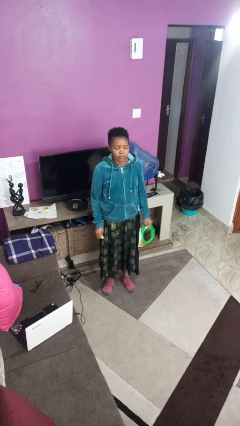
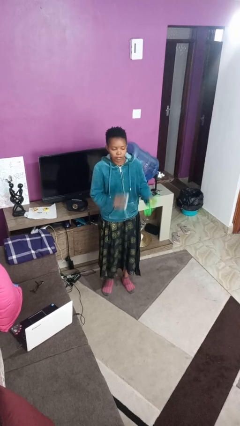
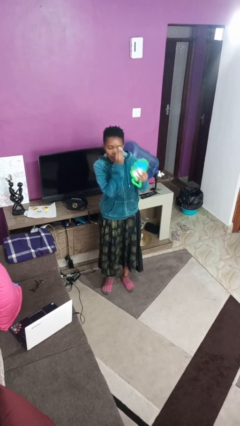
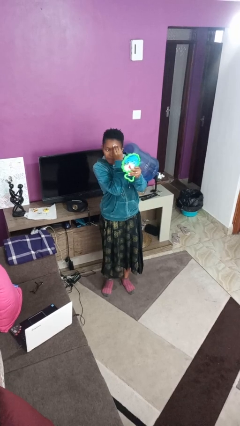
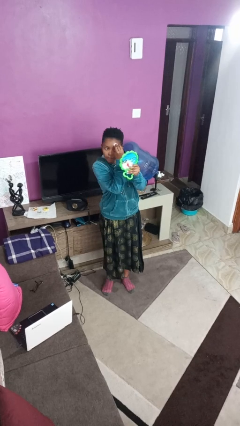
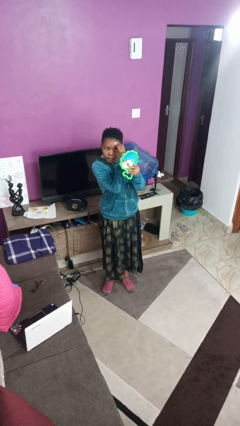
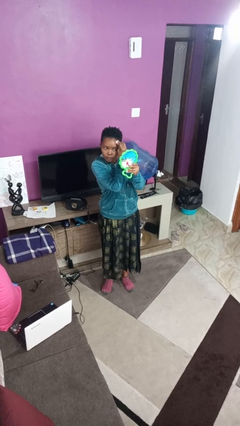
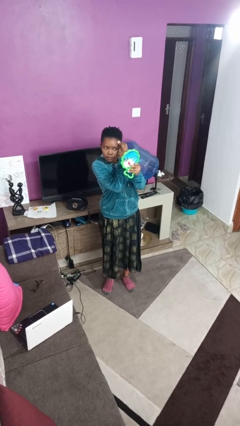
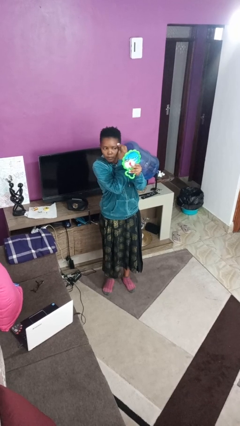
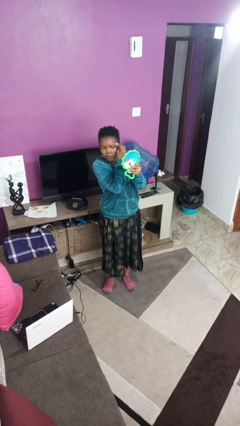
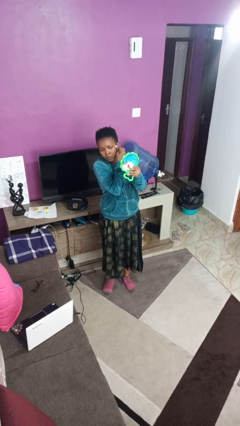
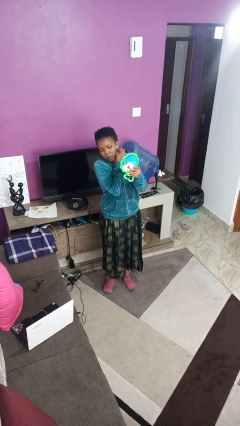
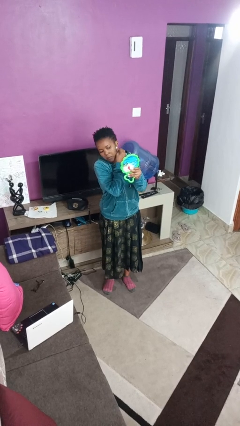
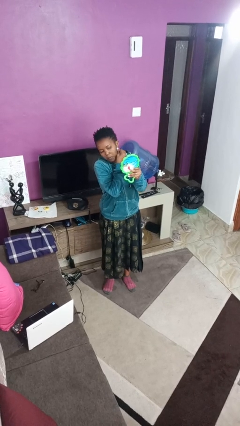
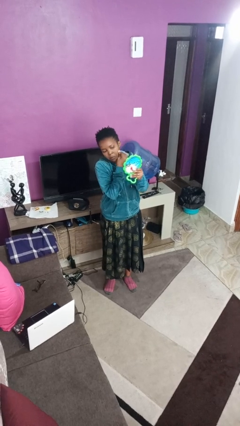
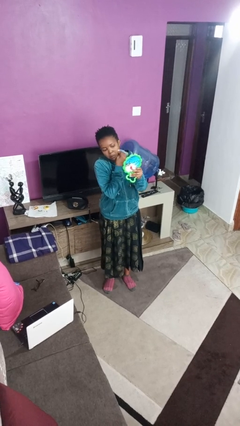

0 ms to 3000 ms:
person applies foundation makeup

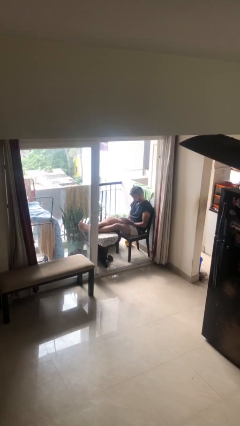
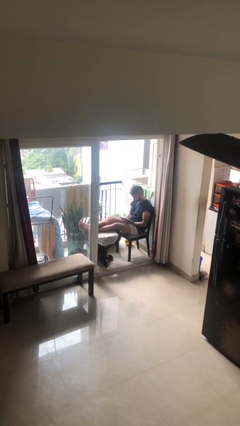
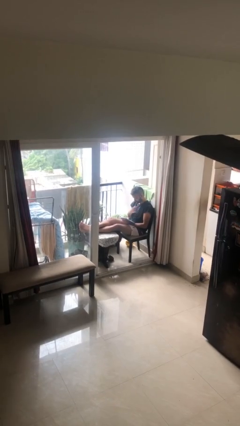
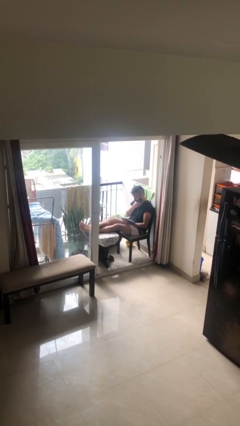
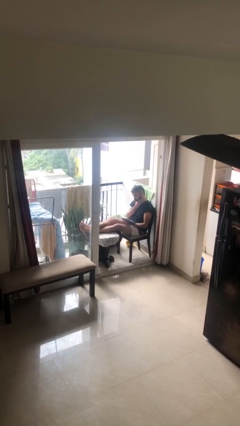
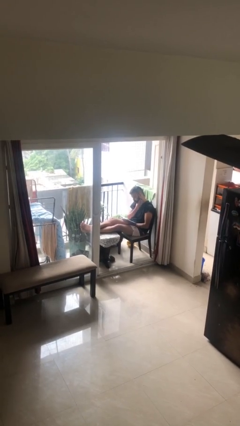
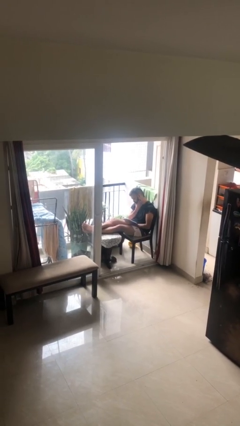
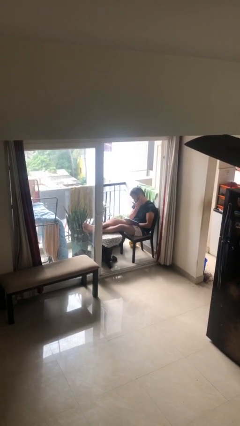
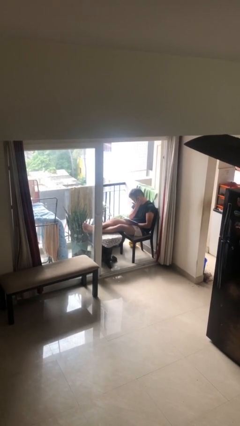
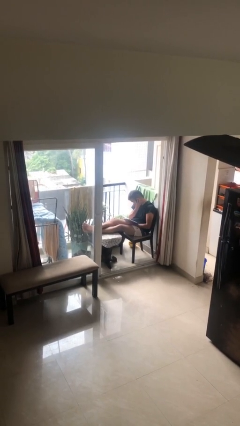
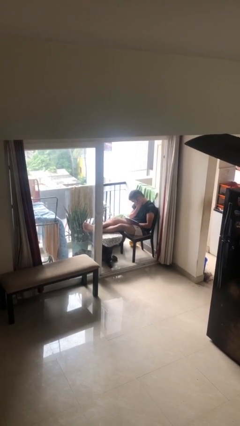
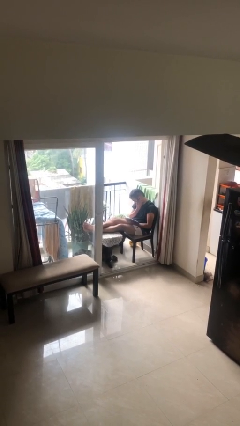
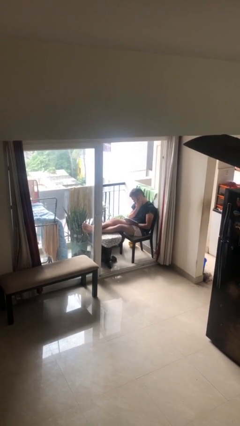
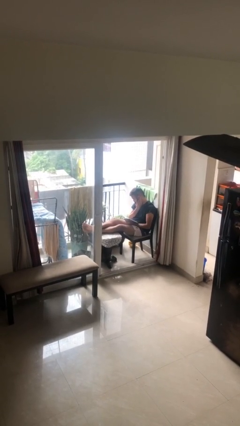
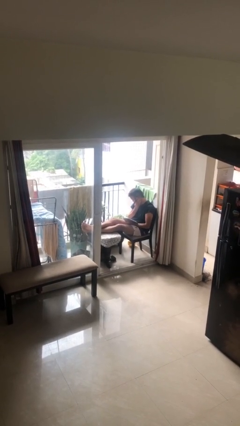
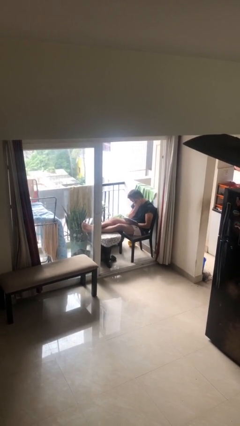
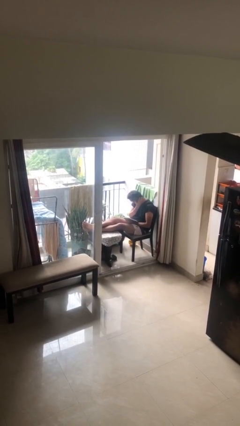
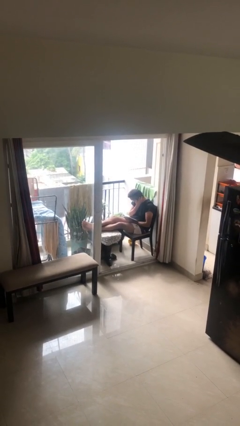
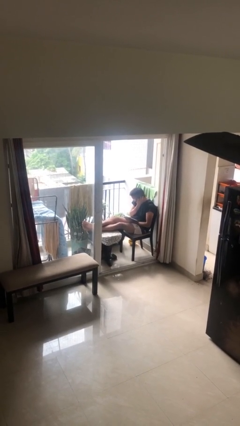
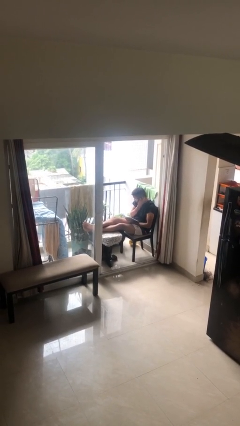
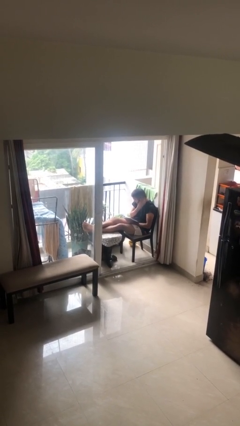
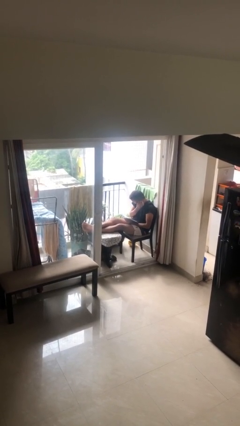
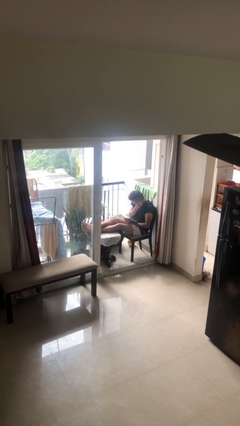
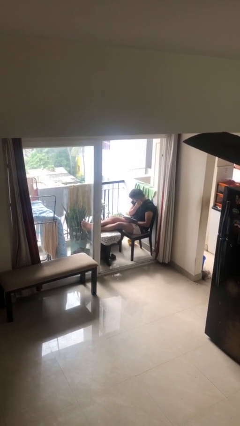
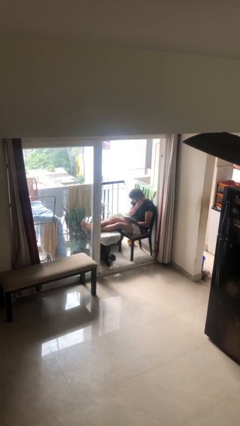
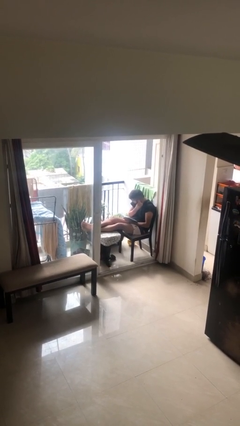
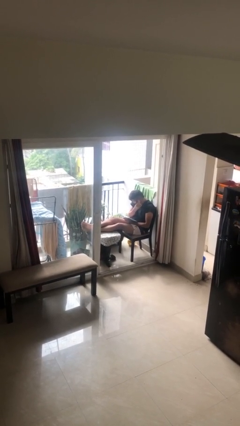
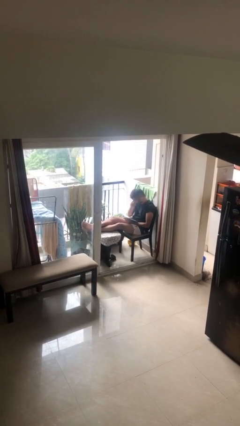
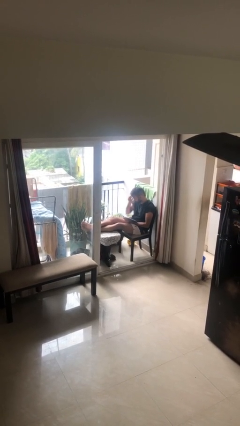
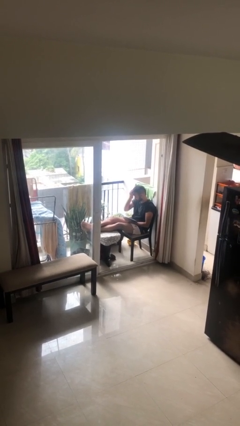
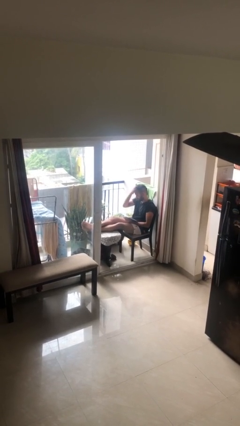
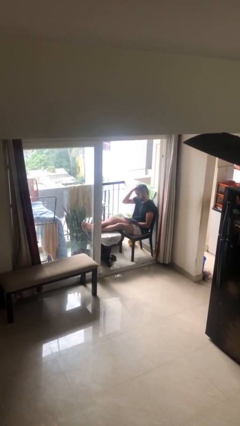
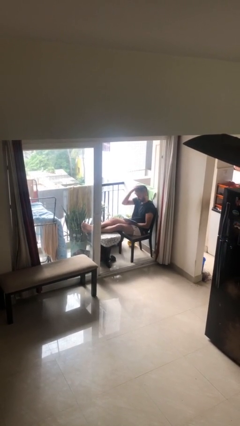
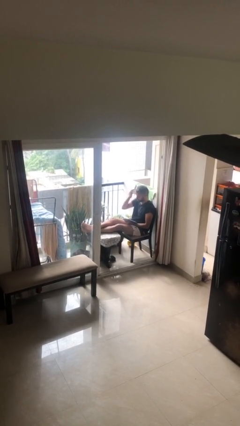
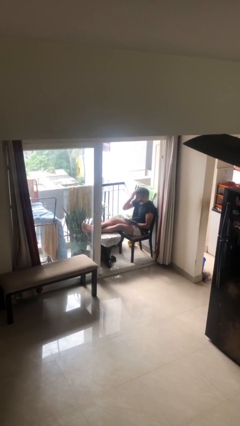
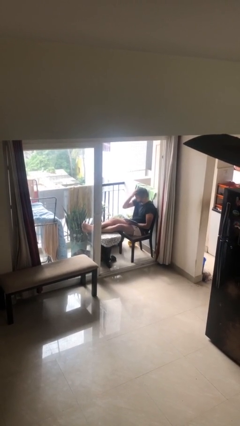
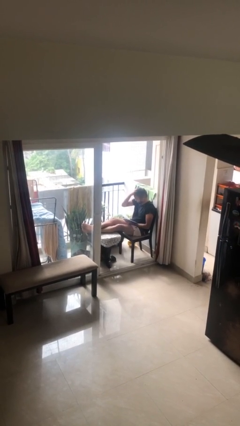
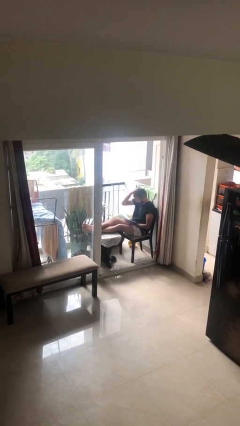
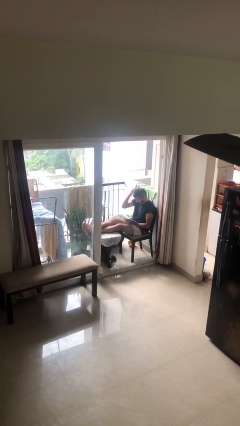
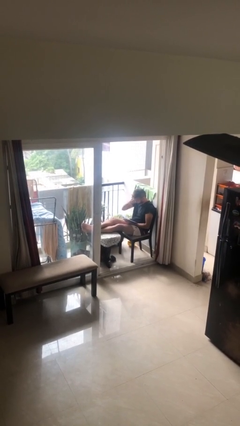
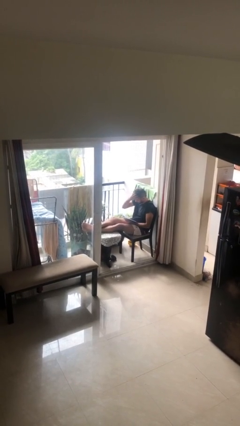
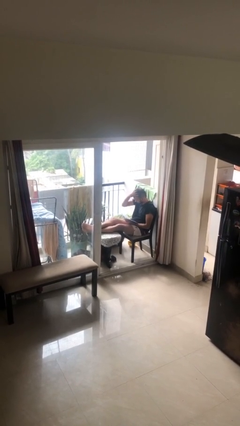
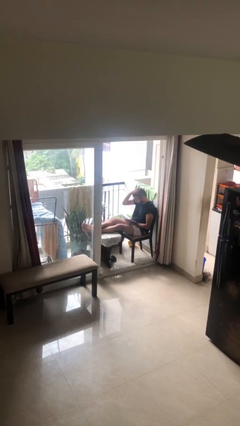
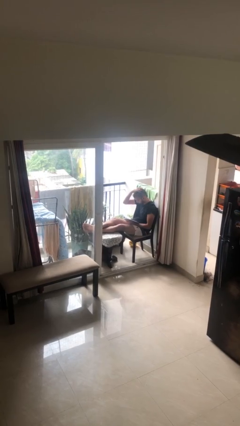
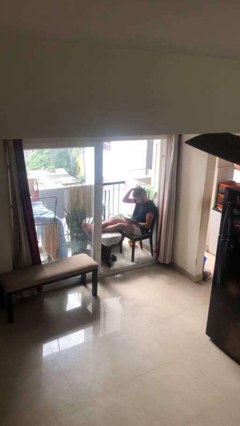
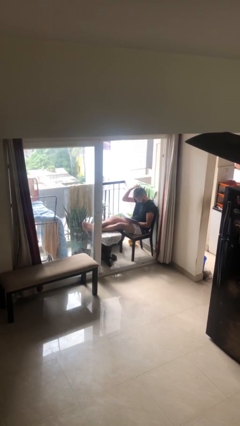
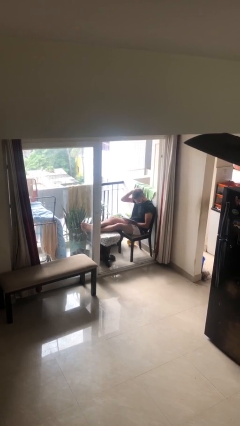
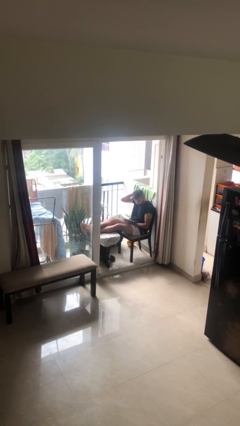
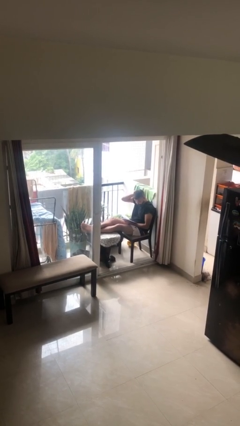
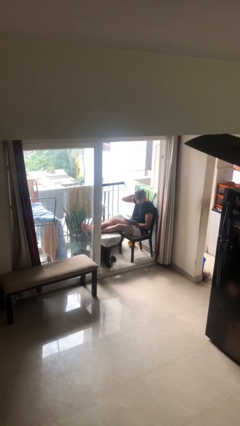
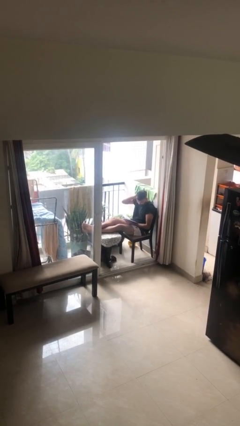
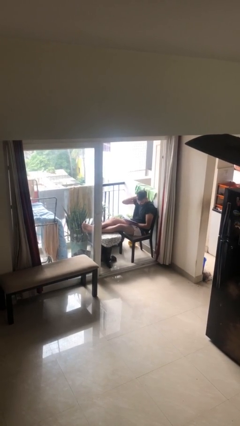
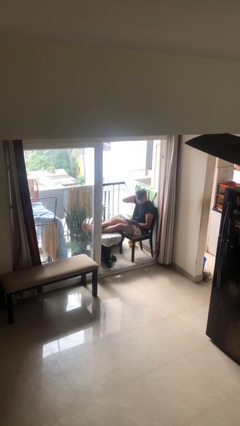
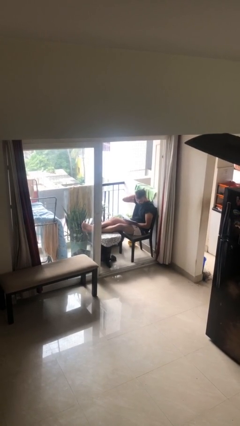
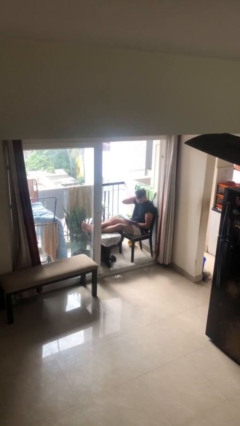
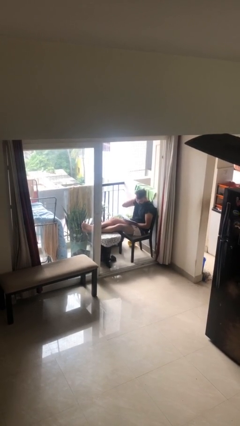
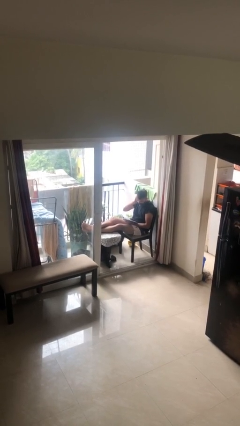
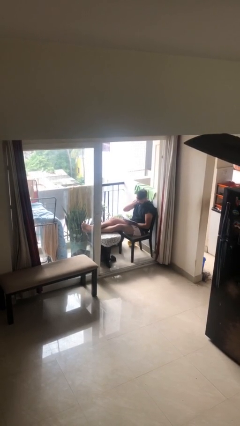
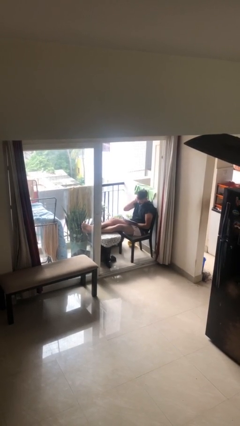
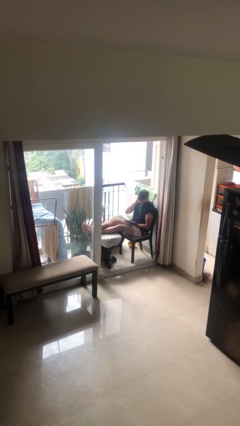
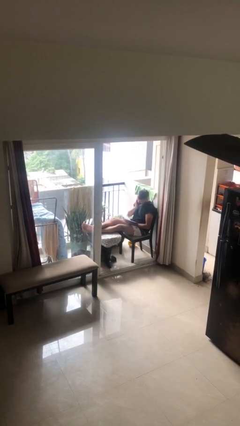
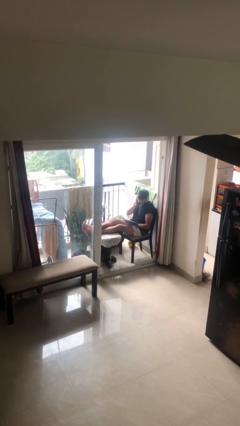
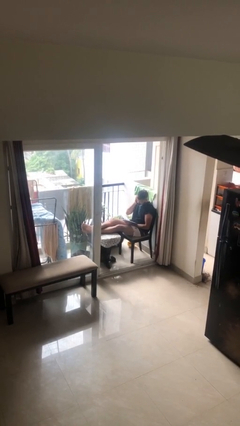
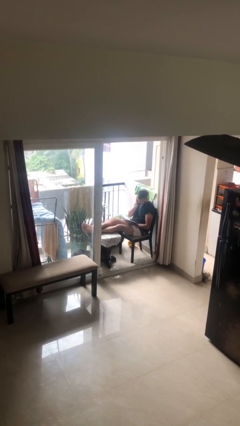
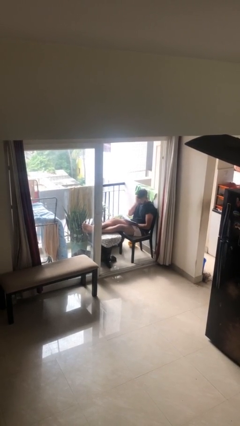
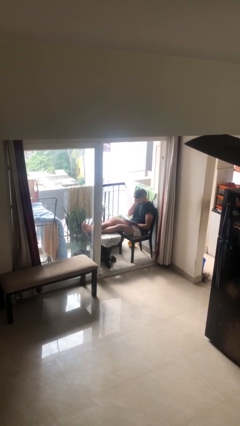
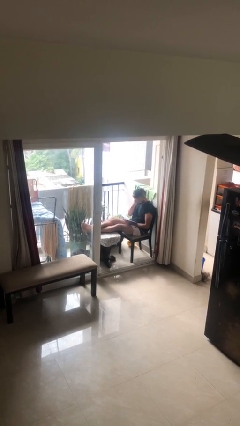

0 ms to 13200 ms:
person reads document

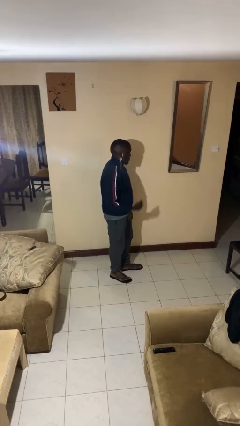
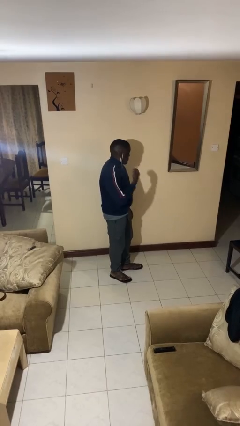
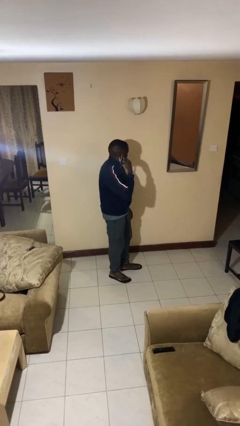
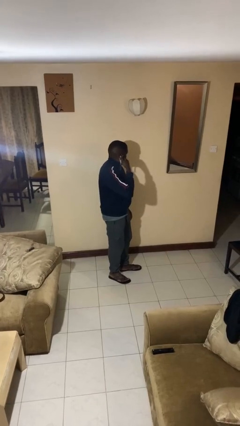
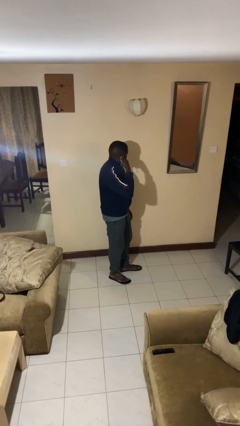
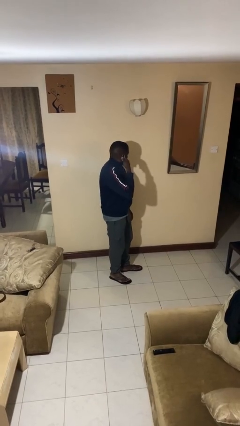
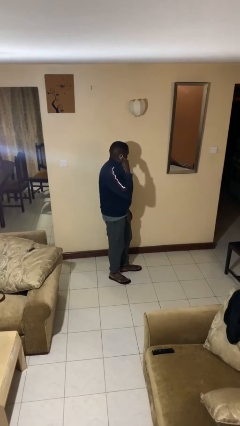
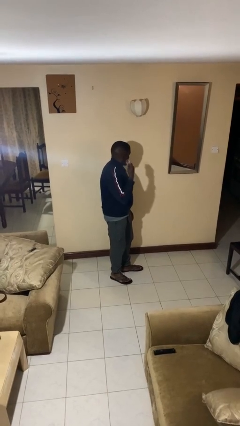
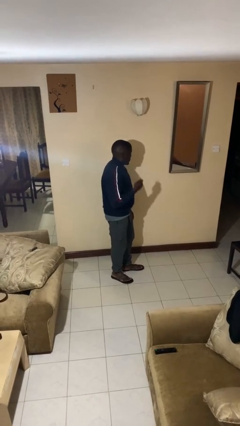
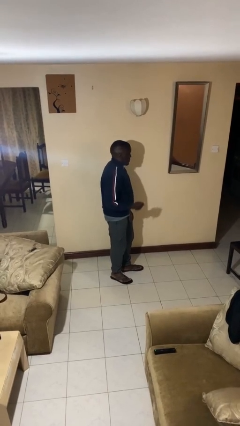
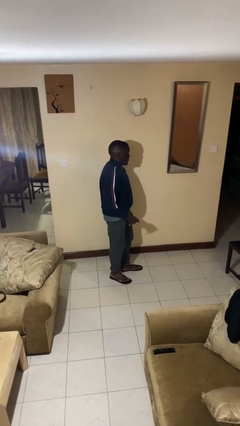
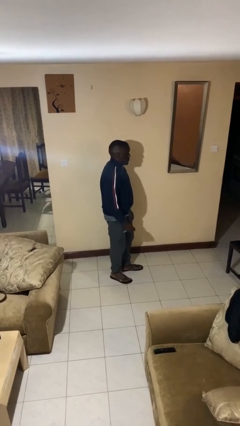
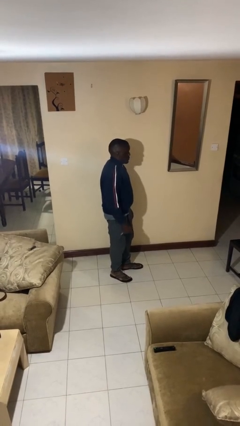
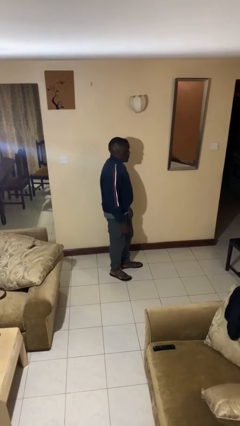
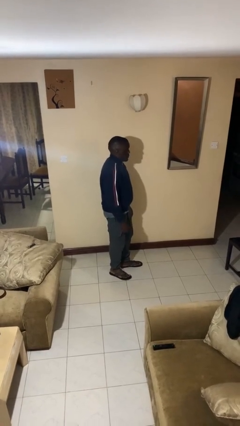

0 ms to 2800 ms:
person takes off earrings
